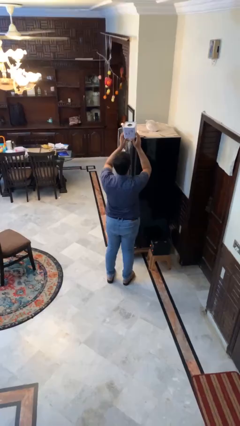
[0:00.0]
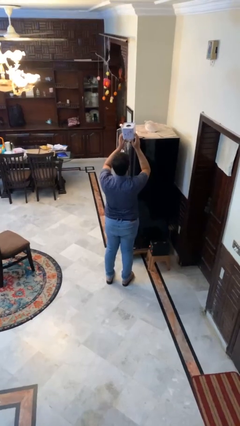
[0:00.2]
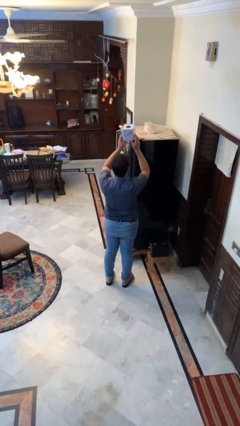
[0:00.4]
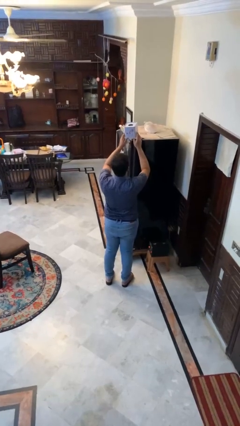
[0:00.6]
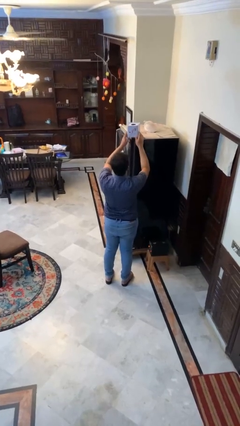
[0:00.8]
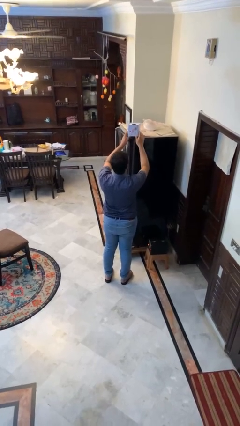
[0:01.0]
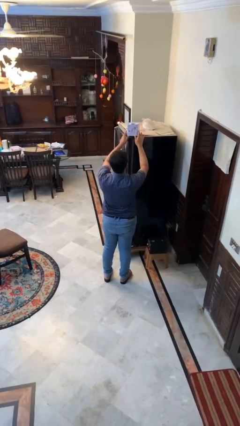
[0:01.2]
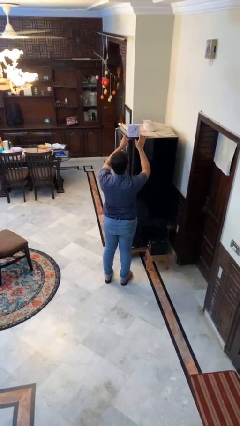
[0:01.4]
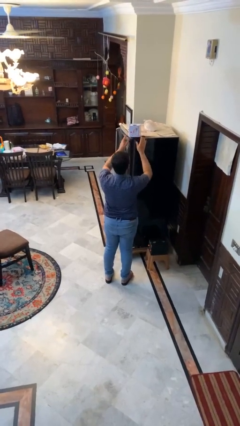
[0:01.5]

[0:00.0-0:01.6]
person puts down object on shelf

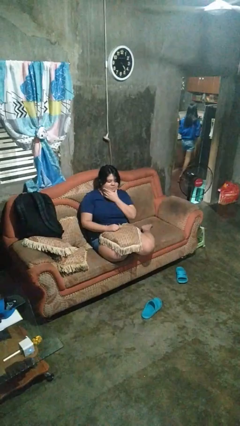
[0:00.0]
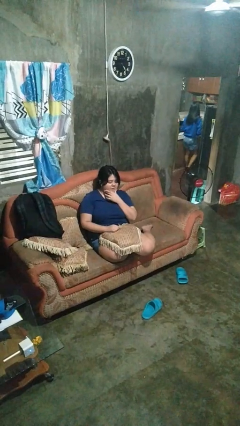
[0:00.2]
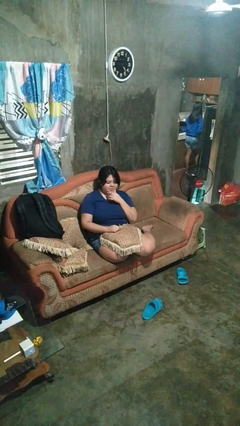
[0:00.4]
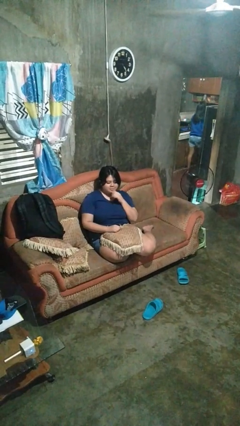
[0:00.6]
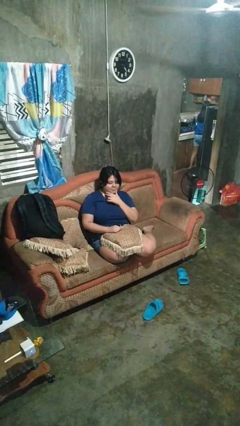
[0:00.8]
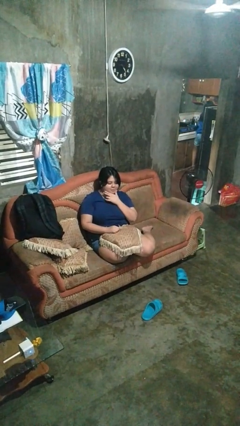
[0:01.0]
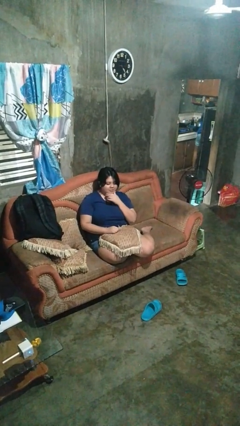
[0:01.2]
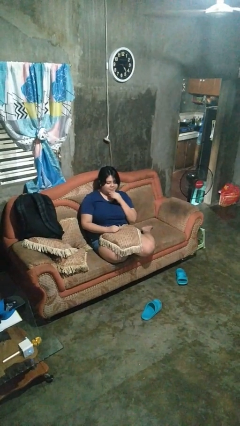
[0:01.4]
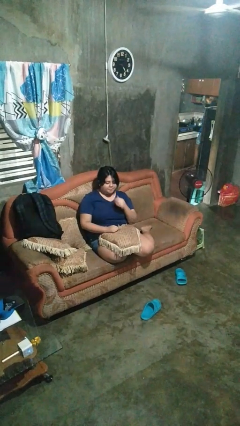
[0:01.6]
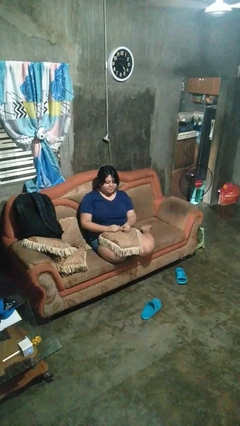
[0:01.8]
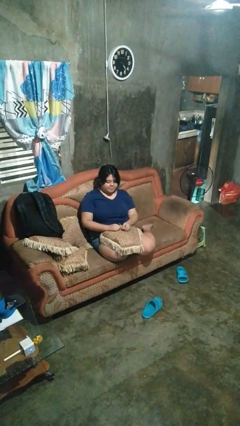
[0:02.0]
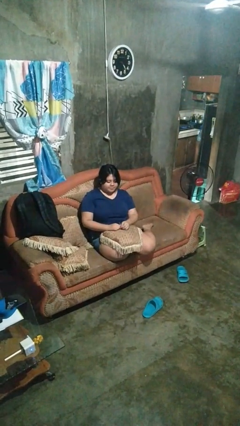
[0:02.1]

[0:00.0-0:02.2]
person strokes chin

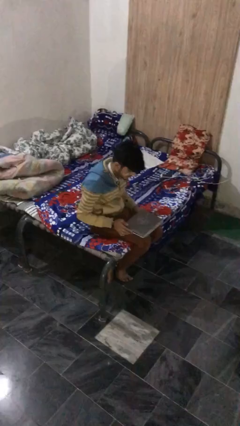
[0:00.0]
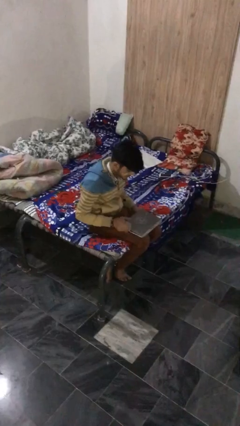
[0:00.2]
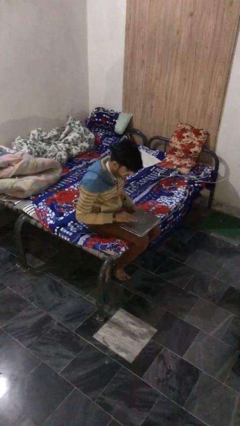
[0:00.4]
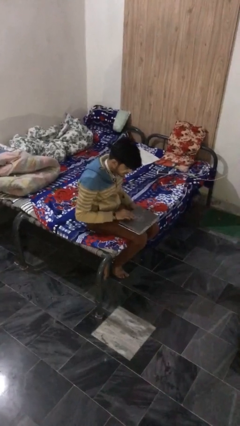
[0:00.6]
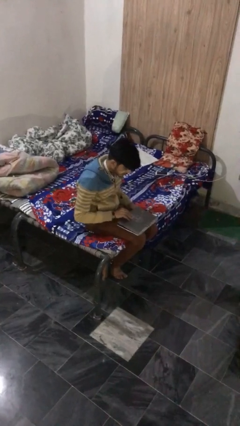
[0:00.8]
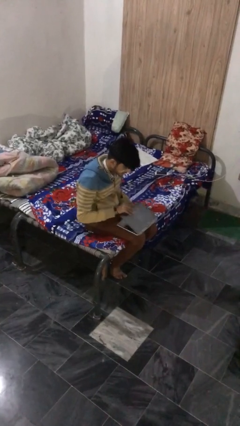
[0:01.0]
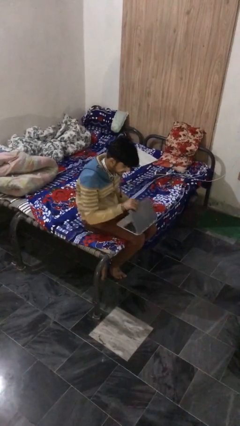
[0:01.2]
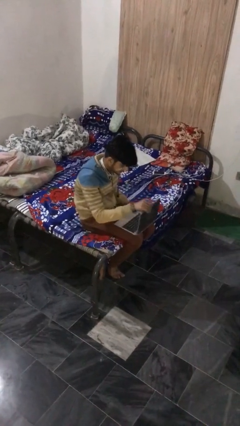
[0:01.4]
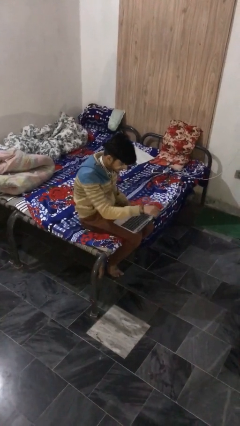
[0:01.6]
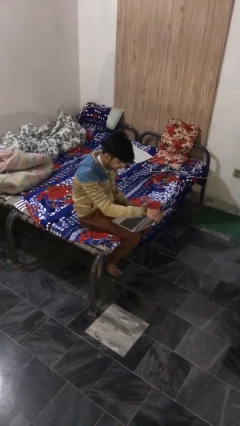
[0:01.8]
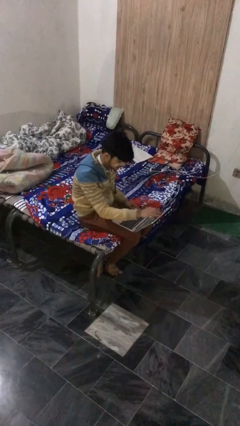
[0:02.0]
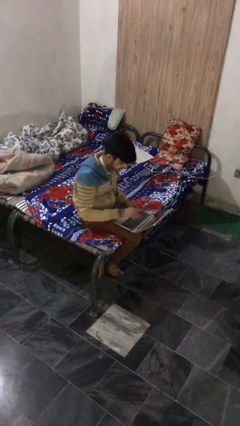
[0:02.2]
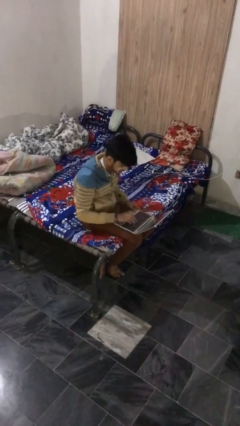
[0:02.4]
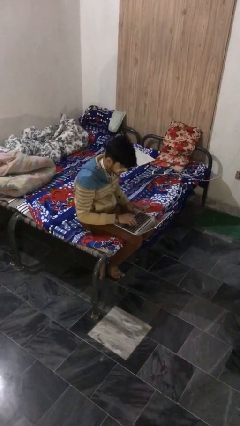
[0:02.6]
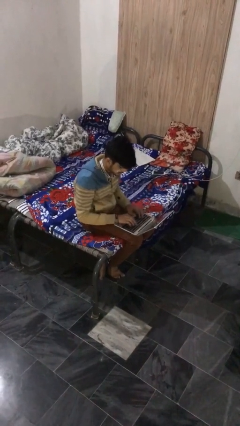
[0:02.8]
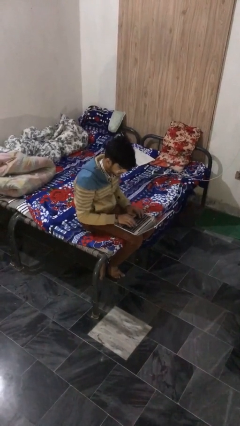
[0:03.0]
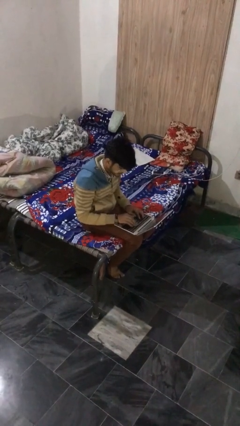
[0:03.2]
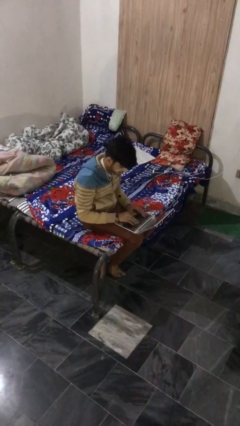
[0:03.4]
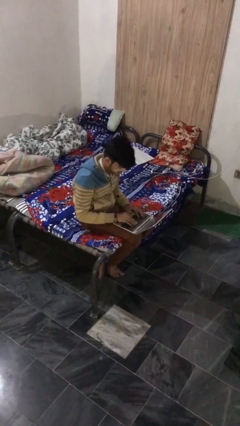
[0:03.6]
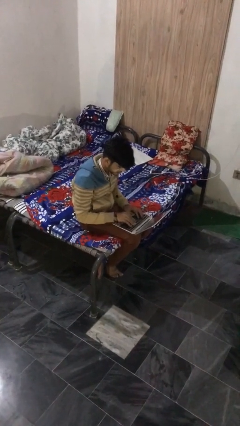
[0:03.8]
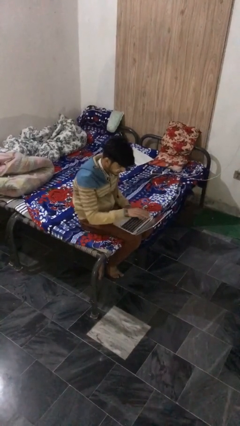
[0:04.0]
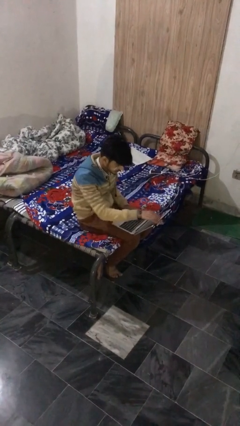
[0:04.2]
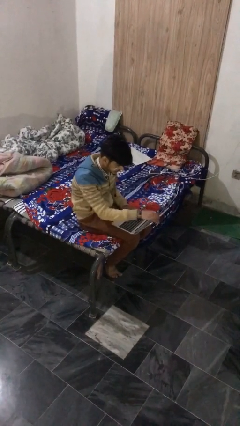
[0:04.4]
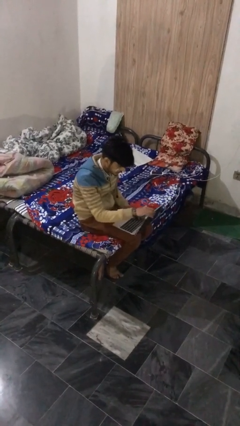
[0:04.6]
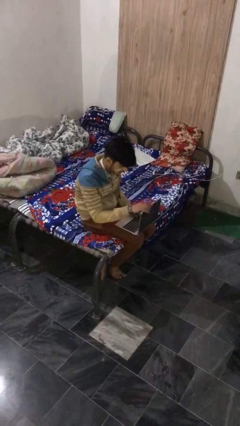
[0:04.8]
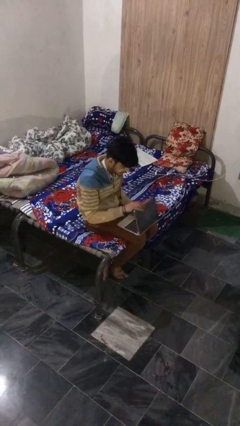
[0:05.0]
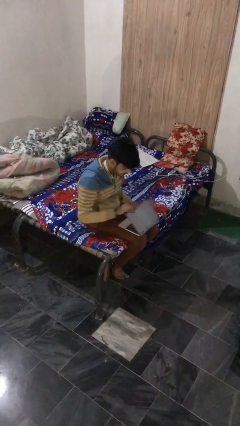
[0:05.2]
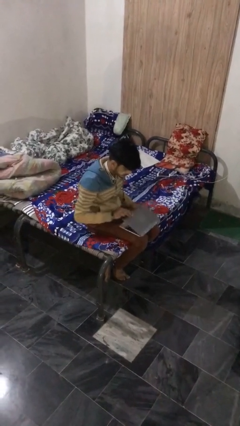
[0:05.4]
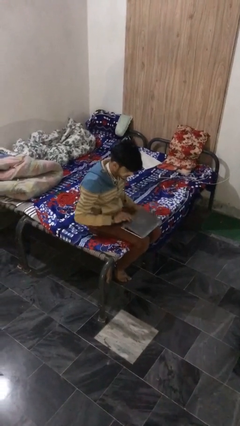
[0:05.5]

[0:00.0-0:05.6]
person interacts with laptop

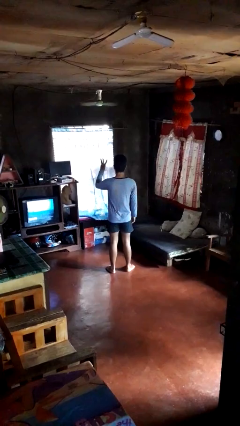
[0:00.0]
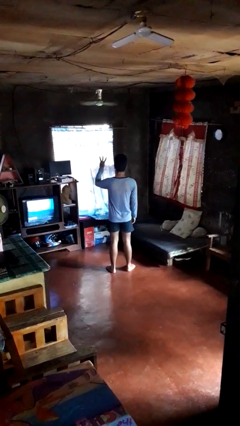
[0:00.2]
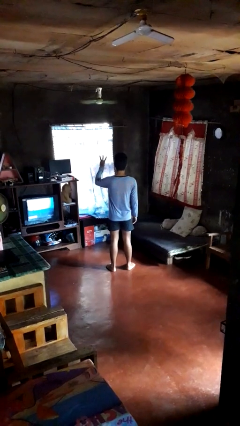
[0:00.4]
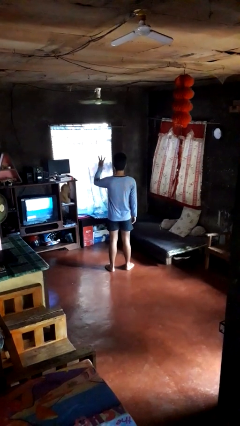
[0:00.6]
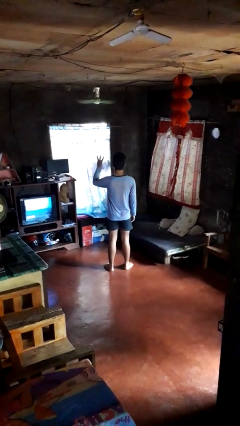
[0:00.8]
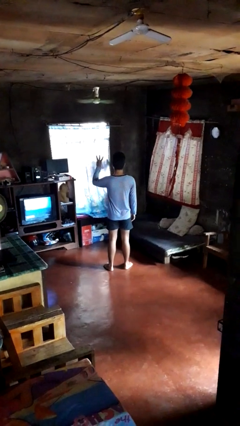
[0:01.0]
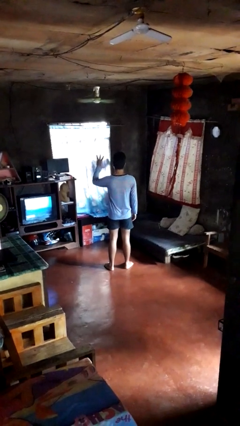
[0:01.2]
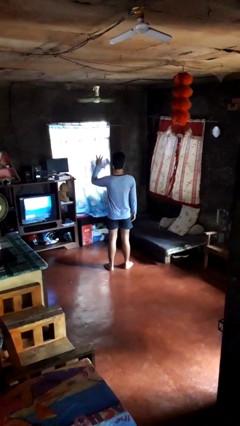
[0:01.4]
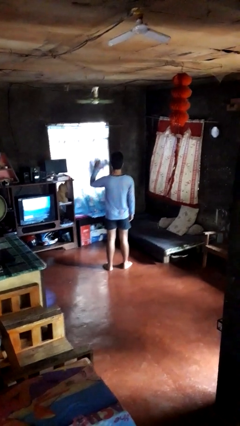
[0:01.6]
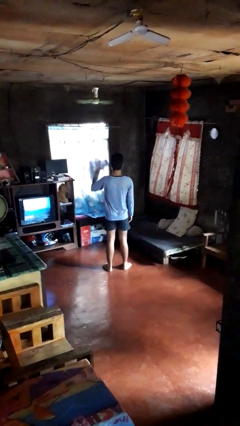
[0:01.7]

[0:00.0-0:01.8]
person gestures number three

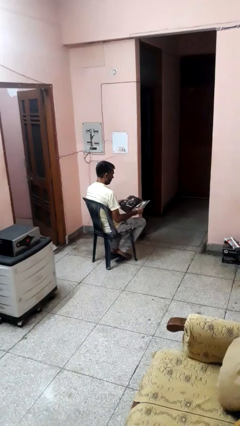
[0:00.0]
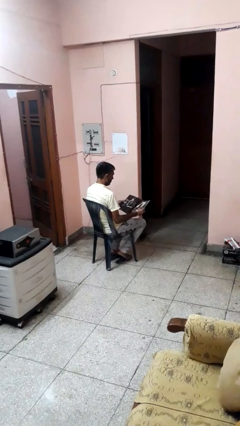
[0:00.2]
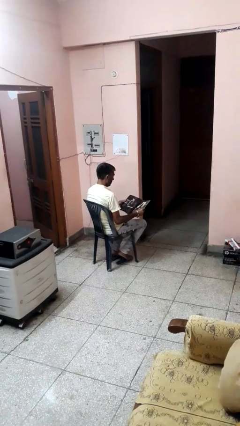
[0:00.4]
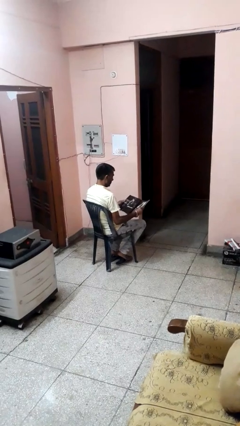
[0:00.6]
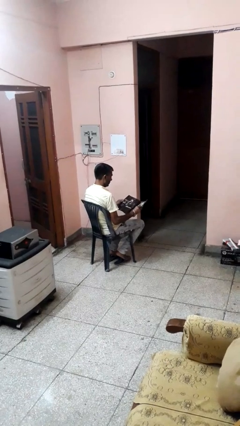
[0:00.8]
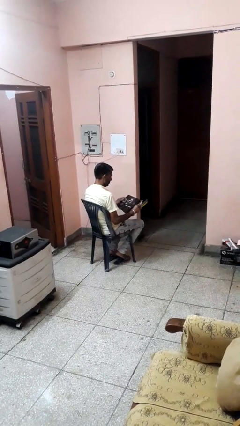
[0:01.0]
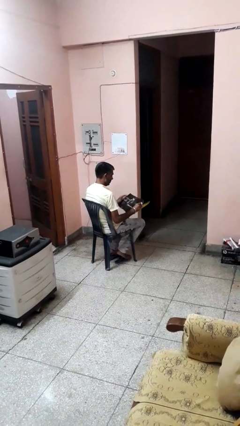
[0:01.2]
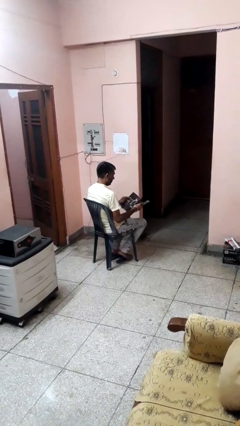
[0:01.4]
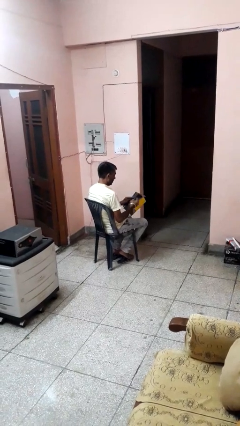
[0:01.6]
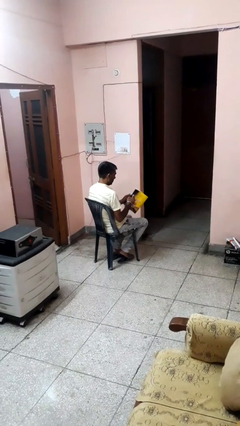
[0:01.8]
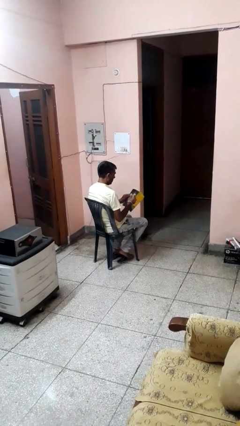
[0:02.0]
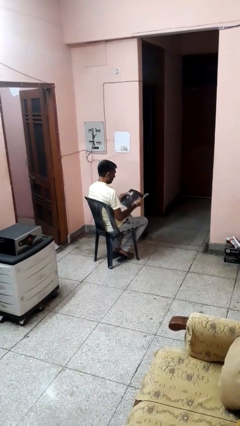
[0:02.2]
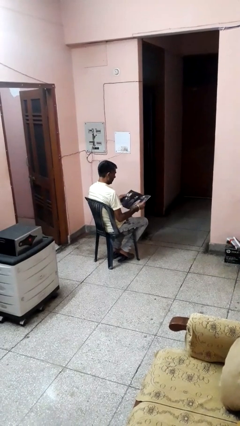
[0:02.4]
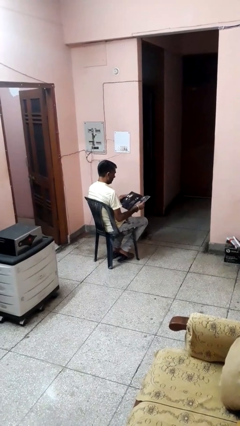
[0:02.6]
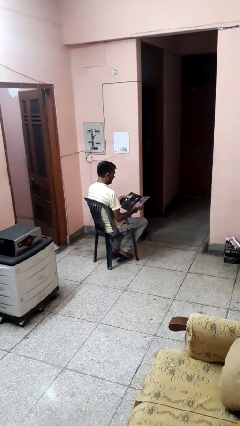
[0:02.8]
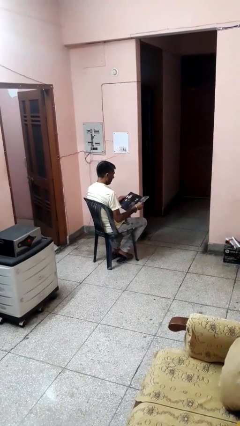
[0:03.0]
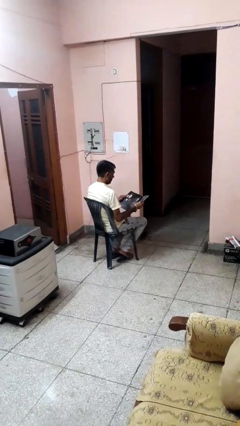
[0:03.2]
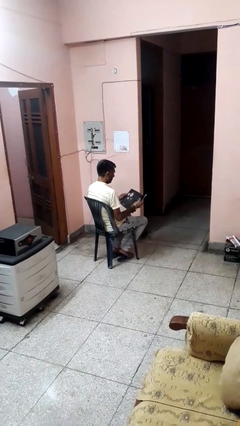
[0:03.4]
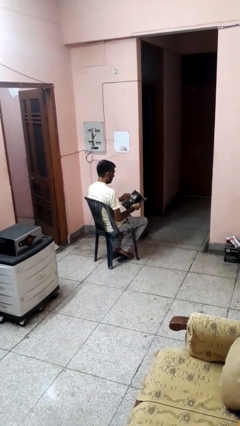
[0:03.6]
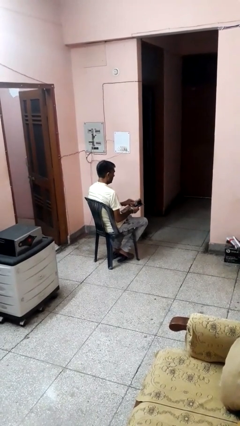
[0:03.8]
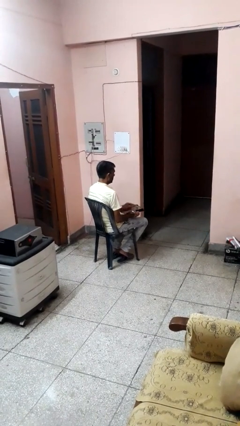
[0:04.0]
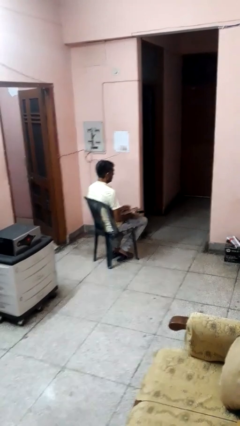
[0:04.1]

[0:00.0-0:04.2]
person reads magazine

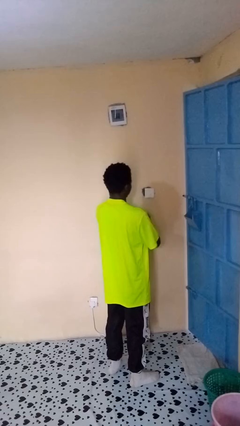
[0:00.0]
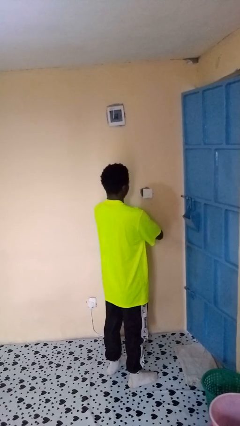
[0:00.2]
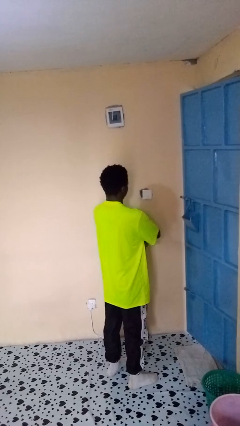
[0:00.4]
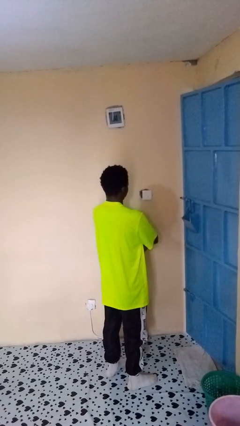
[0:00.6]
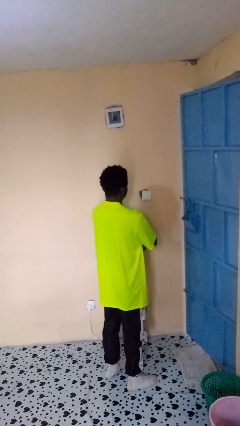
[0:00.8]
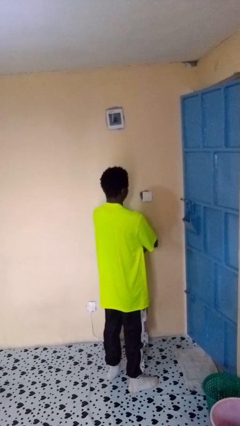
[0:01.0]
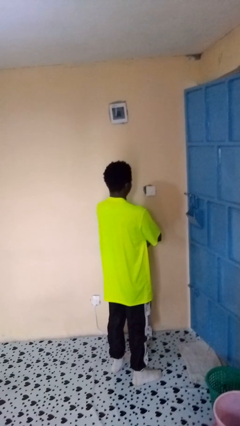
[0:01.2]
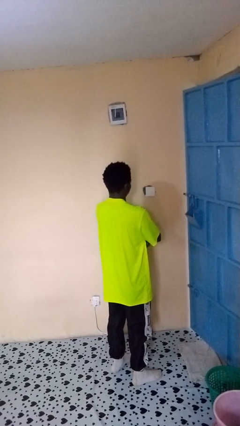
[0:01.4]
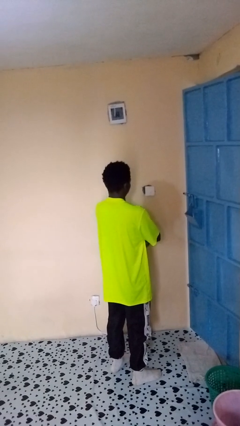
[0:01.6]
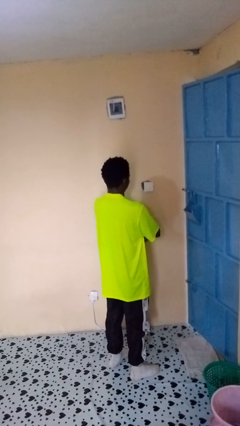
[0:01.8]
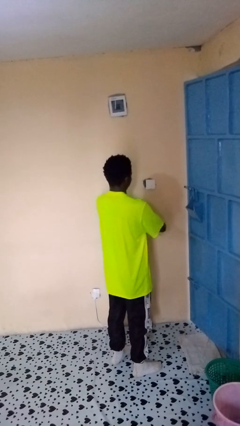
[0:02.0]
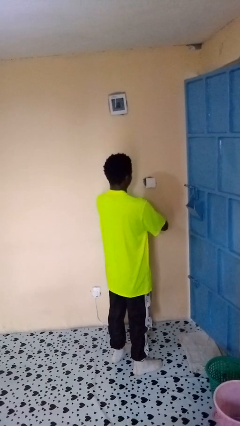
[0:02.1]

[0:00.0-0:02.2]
person crosses arms
